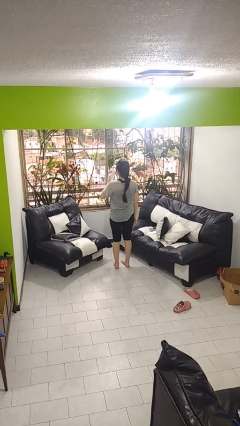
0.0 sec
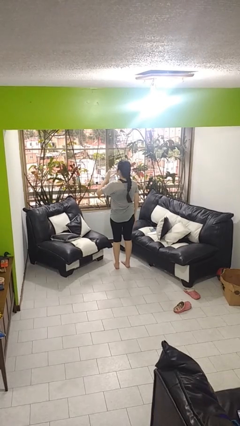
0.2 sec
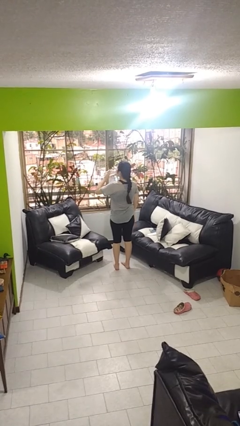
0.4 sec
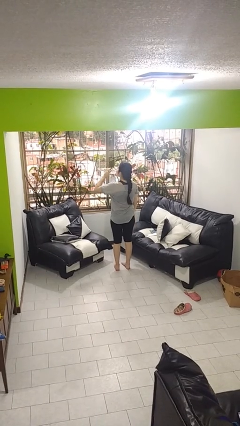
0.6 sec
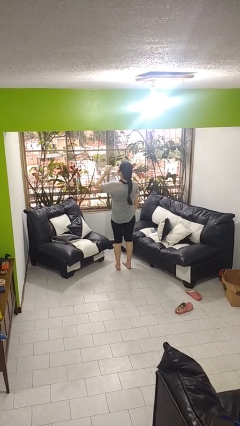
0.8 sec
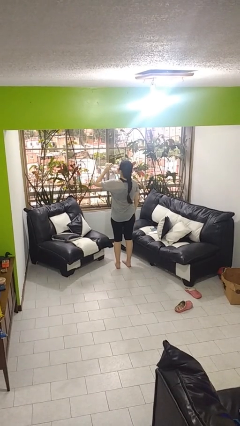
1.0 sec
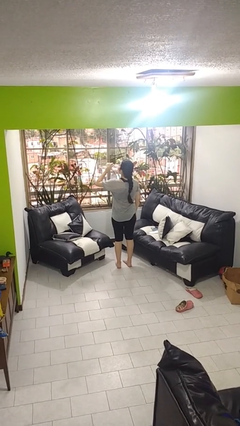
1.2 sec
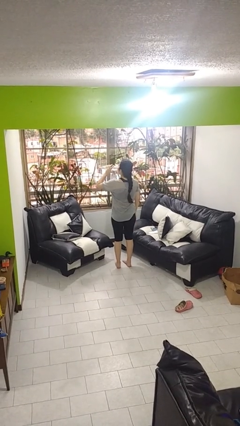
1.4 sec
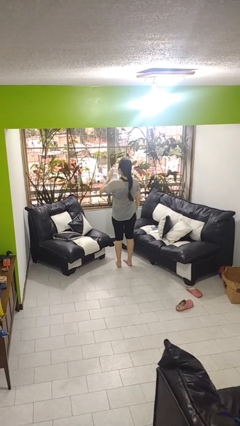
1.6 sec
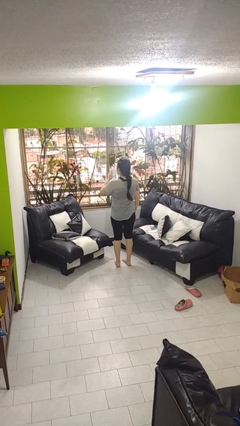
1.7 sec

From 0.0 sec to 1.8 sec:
person drinks from bottle

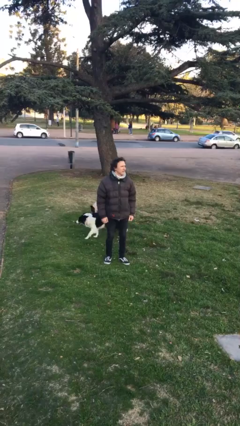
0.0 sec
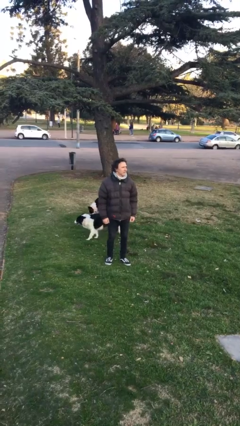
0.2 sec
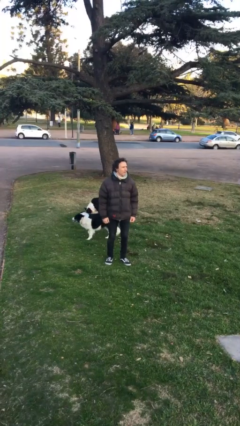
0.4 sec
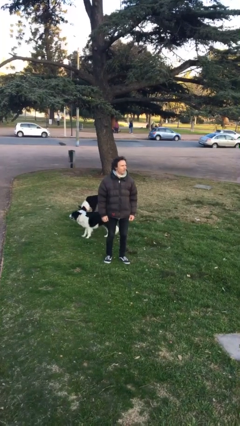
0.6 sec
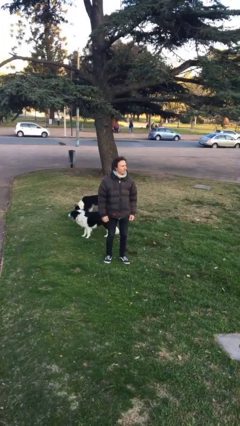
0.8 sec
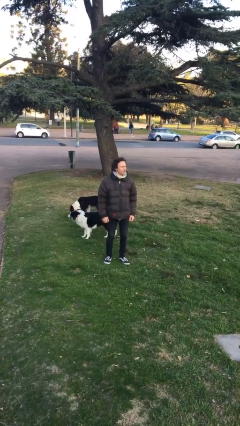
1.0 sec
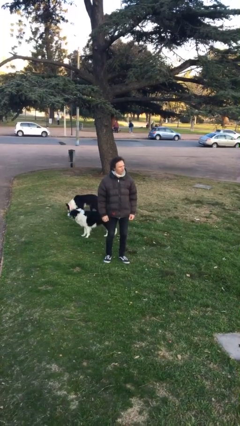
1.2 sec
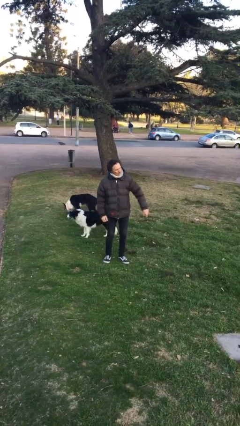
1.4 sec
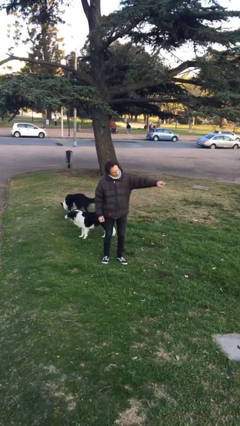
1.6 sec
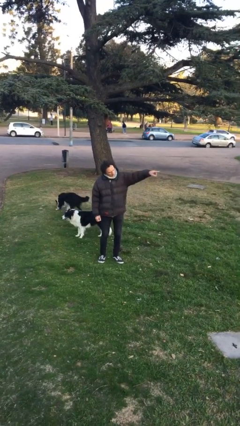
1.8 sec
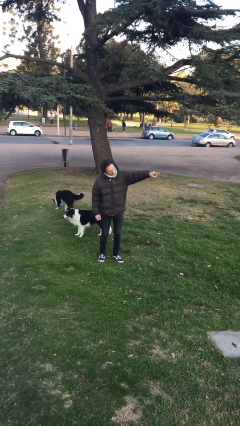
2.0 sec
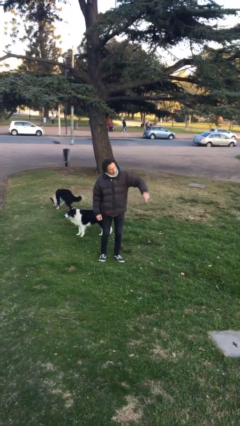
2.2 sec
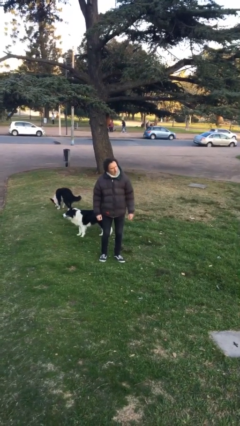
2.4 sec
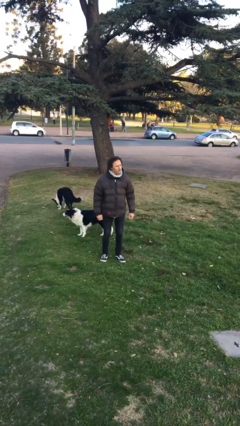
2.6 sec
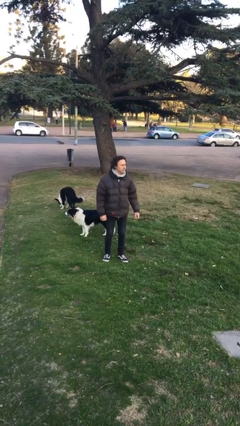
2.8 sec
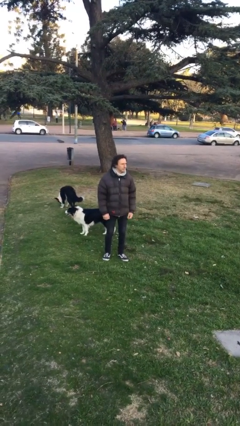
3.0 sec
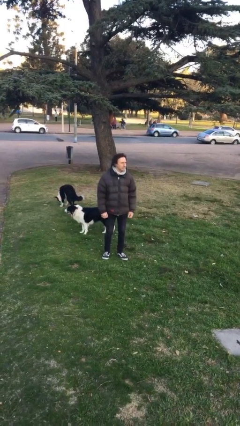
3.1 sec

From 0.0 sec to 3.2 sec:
person points at person

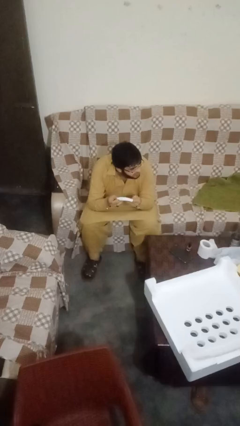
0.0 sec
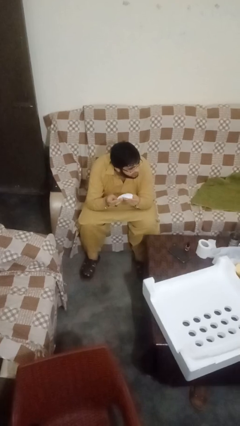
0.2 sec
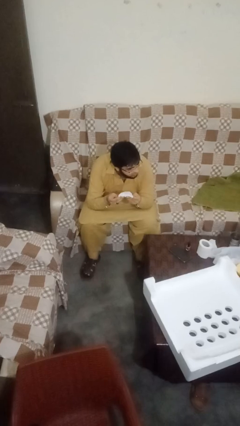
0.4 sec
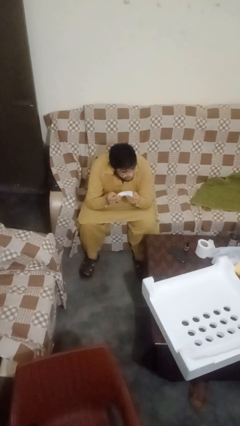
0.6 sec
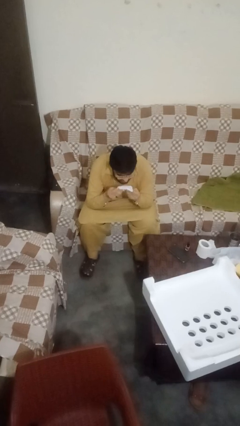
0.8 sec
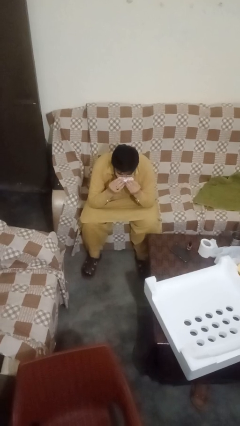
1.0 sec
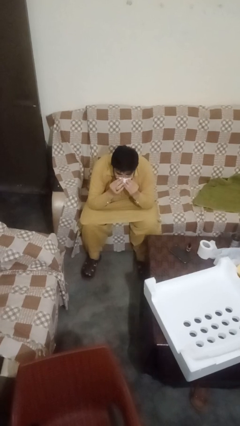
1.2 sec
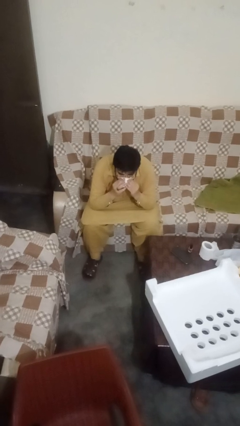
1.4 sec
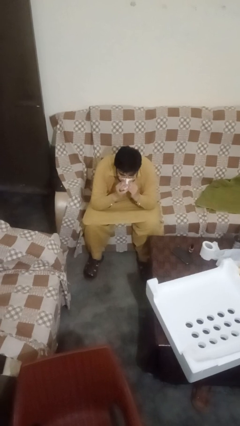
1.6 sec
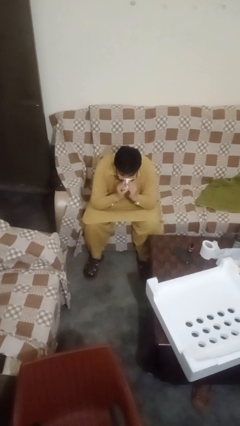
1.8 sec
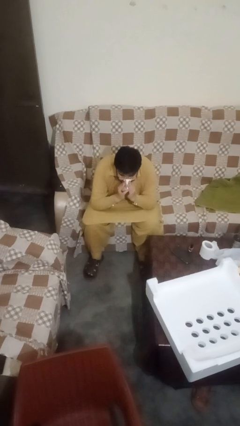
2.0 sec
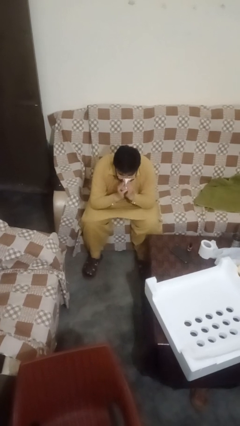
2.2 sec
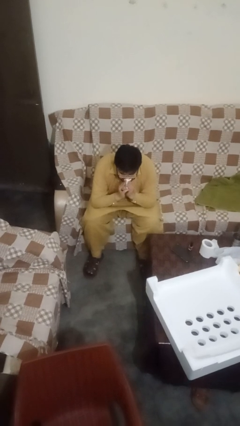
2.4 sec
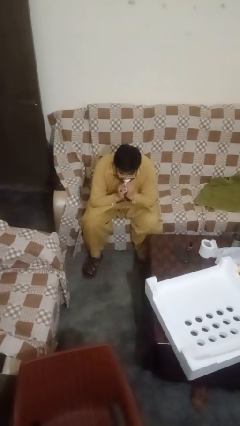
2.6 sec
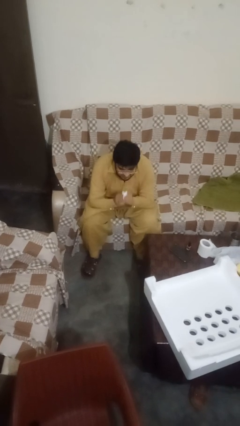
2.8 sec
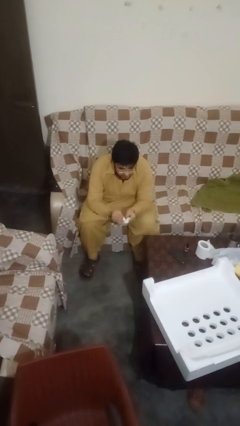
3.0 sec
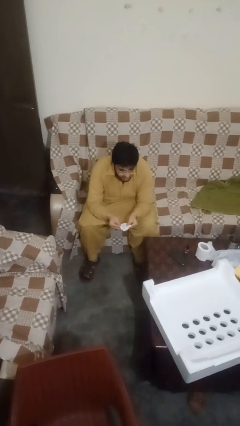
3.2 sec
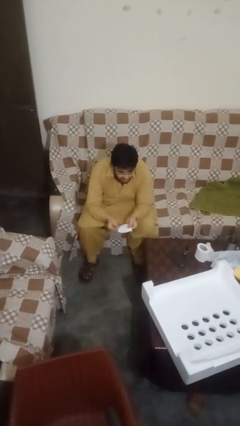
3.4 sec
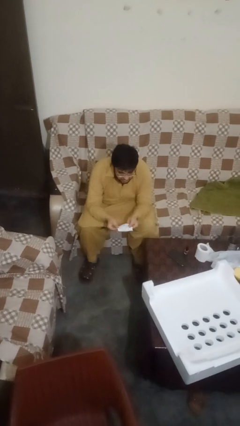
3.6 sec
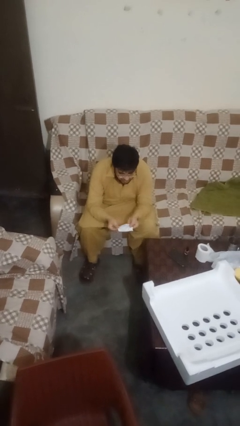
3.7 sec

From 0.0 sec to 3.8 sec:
person blows nose

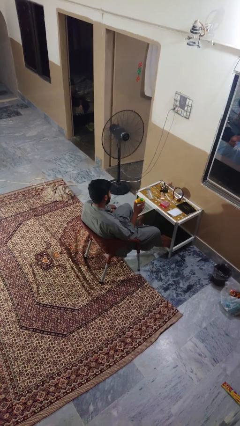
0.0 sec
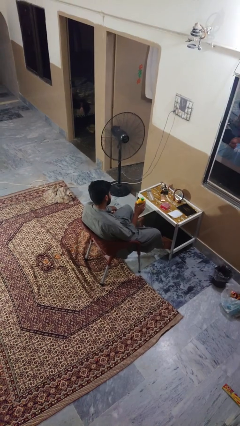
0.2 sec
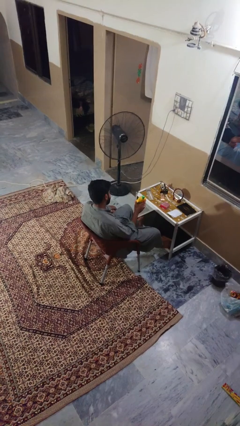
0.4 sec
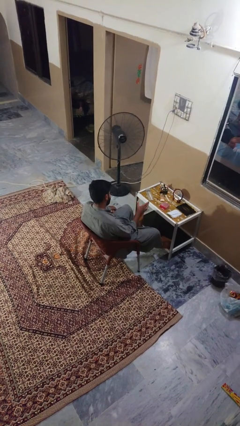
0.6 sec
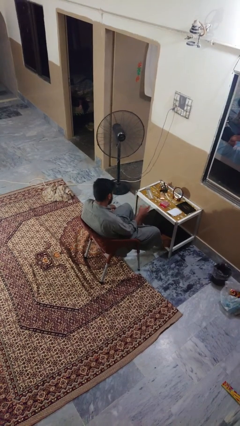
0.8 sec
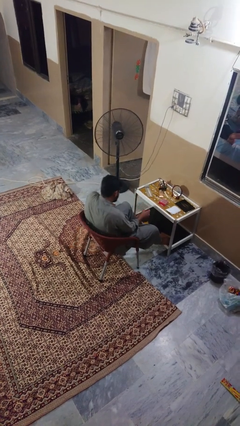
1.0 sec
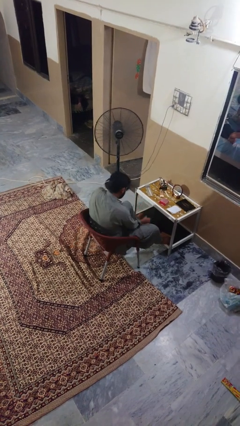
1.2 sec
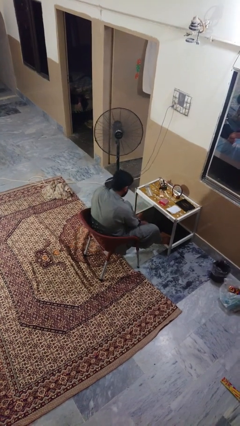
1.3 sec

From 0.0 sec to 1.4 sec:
person throws object to ground

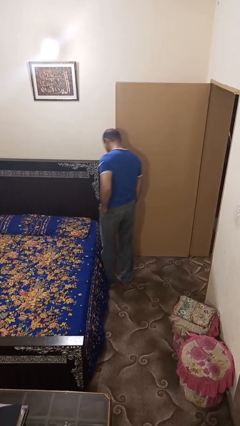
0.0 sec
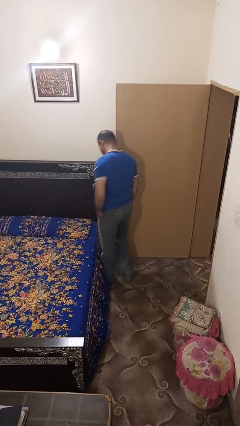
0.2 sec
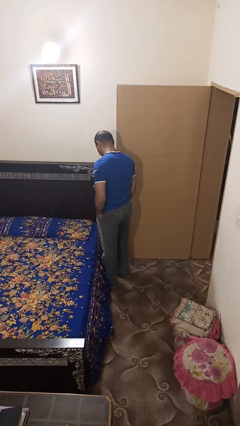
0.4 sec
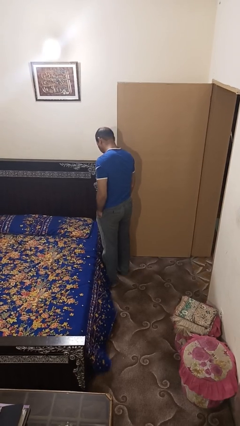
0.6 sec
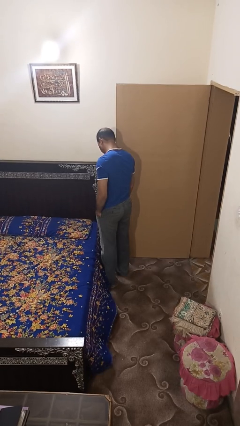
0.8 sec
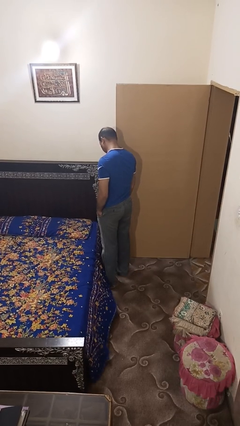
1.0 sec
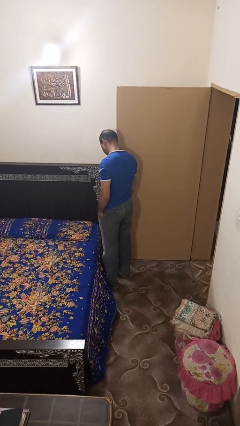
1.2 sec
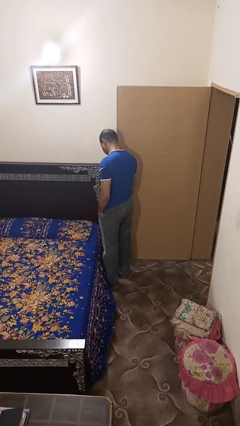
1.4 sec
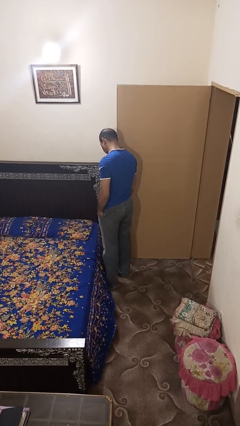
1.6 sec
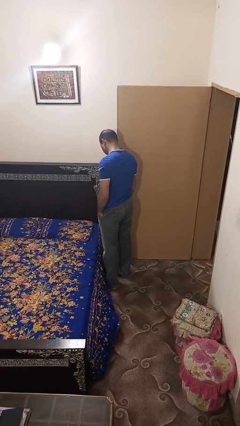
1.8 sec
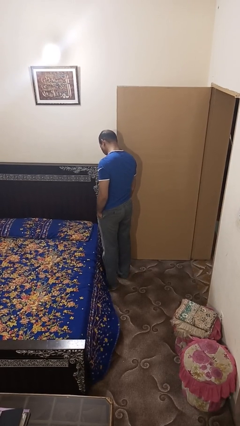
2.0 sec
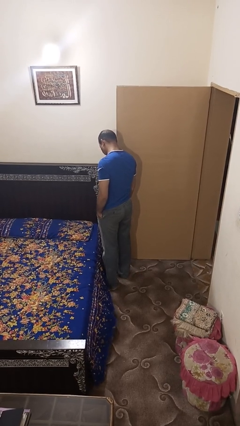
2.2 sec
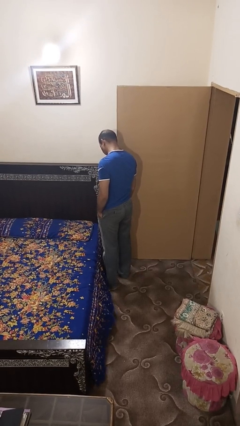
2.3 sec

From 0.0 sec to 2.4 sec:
person puts hands in back pockets

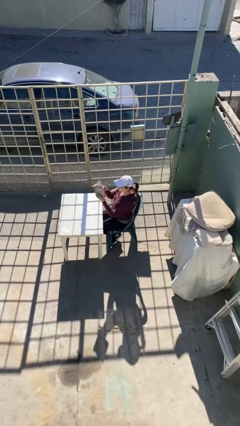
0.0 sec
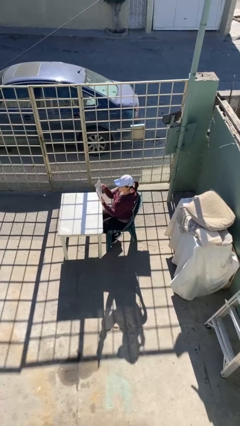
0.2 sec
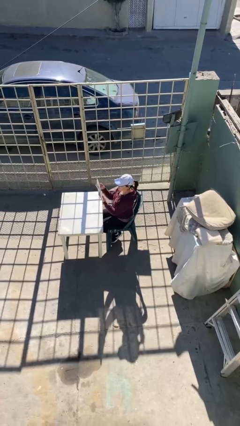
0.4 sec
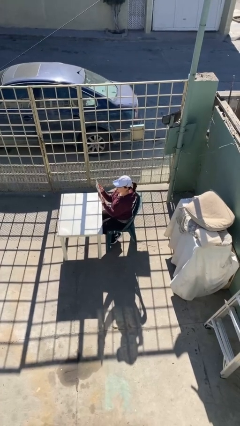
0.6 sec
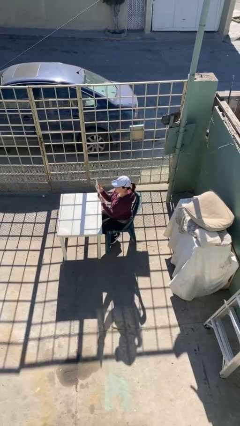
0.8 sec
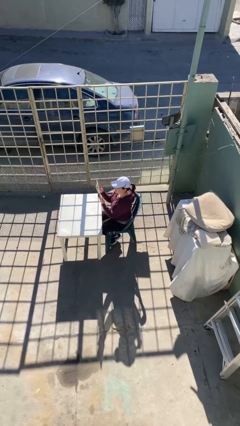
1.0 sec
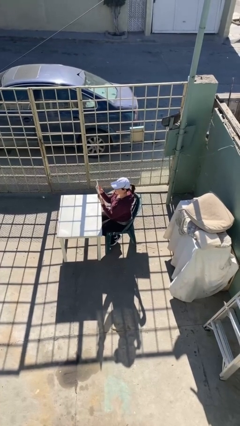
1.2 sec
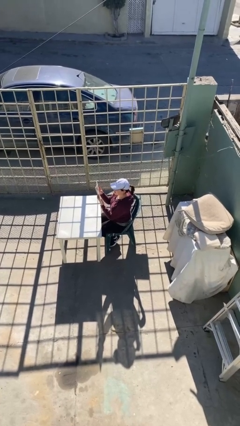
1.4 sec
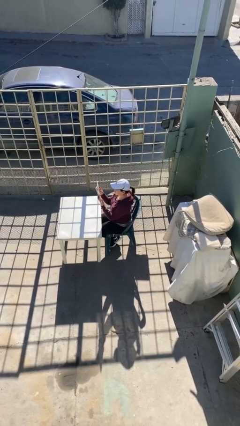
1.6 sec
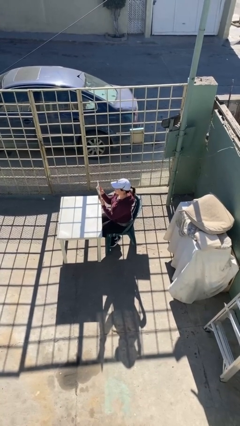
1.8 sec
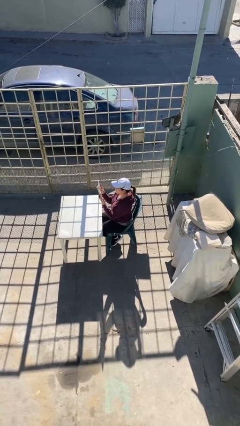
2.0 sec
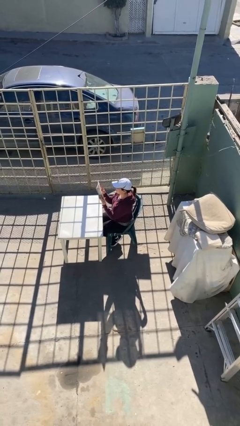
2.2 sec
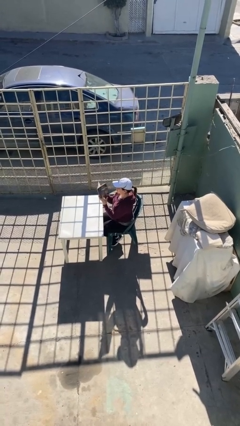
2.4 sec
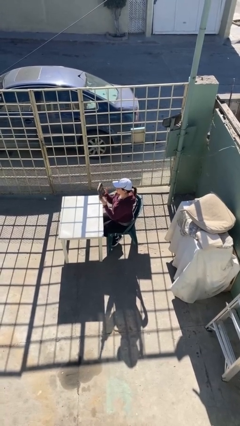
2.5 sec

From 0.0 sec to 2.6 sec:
person reads document

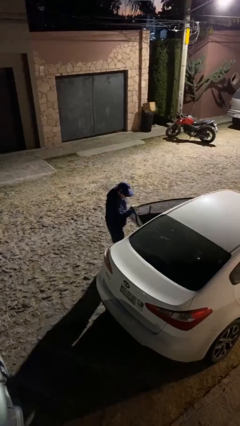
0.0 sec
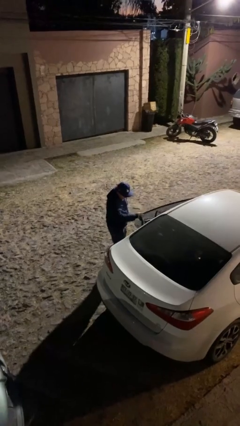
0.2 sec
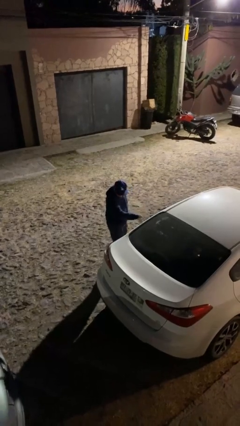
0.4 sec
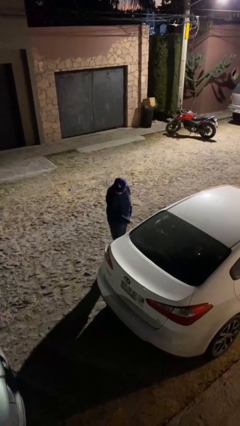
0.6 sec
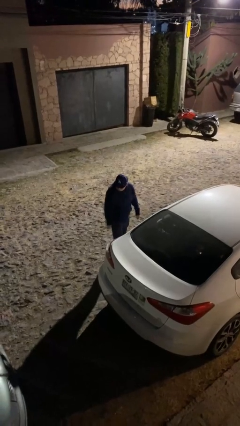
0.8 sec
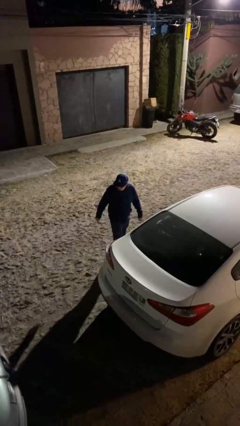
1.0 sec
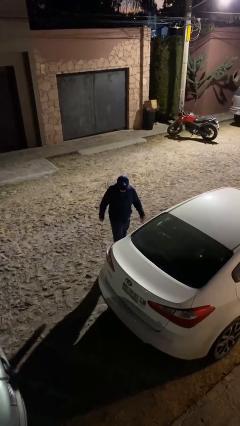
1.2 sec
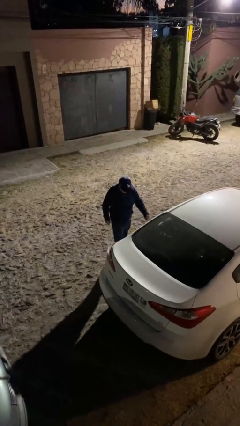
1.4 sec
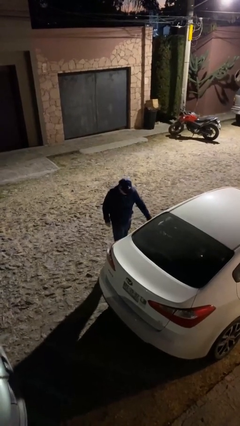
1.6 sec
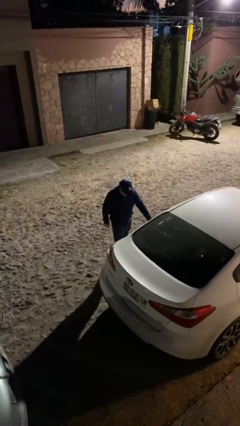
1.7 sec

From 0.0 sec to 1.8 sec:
person closes car door

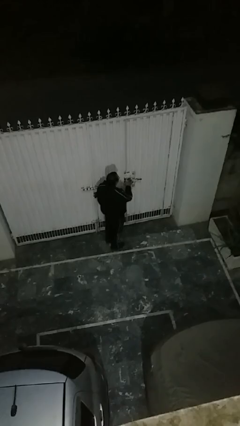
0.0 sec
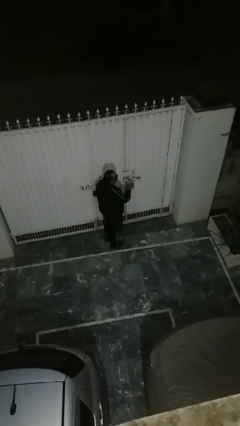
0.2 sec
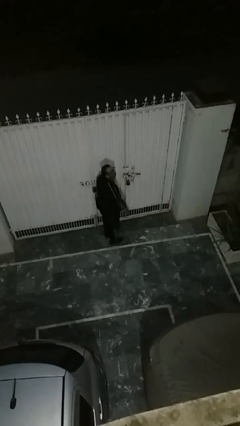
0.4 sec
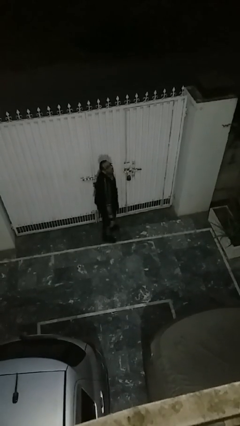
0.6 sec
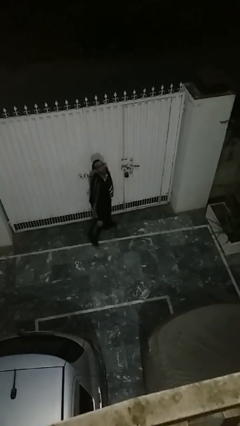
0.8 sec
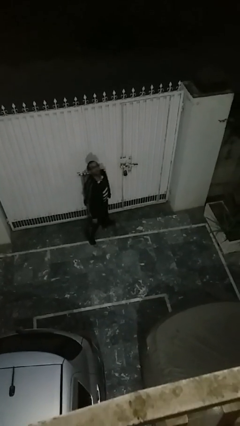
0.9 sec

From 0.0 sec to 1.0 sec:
person opens facility door
